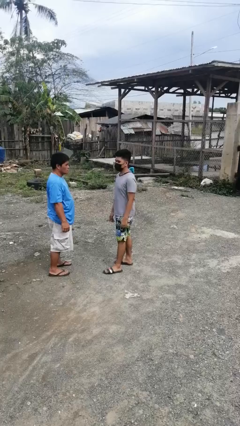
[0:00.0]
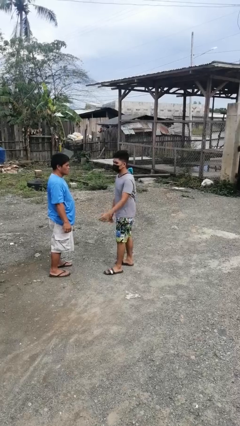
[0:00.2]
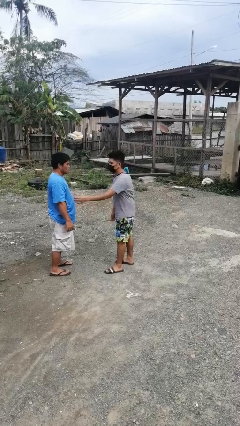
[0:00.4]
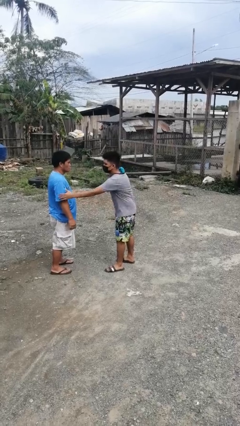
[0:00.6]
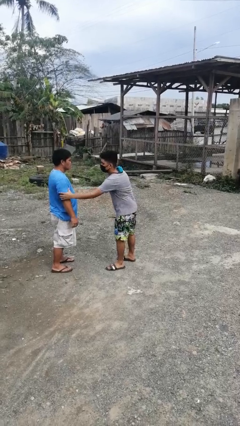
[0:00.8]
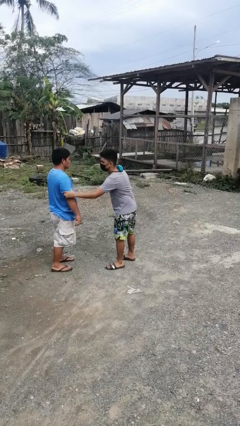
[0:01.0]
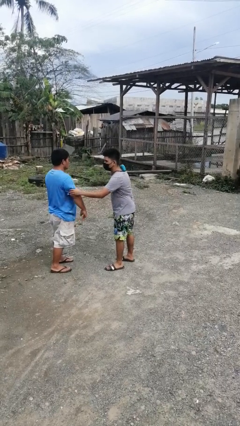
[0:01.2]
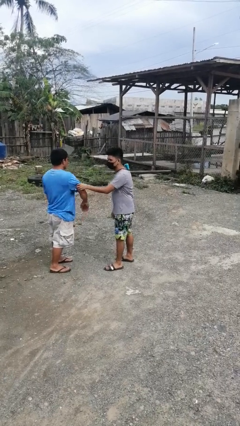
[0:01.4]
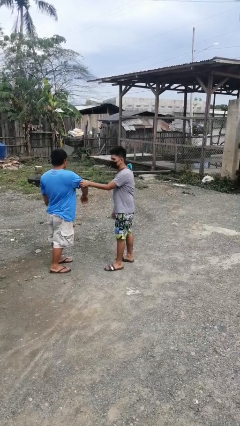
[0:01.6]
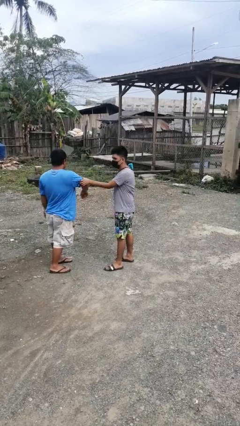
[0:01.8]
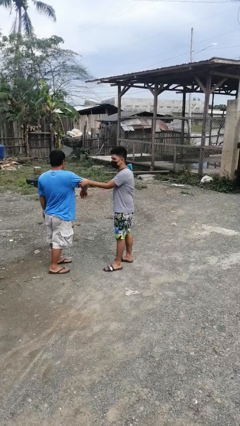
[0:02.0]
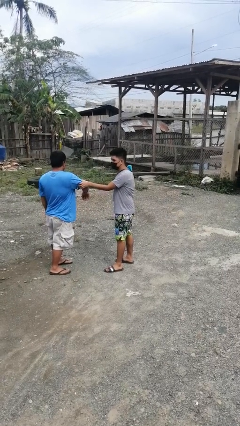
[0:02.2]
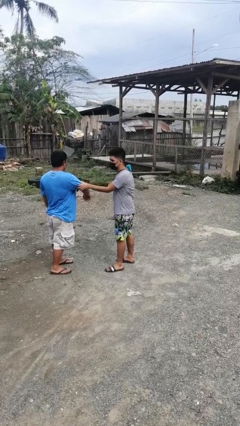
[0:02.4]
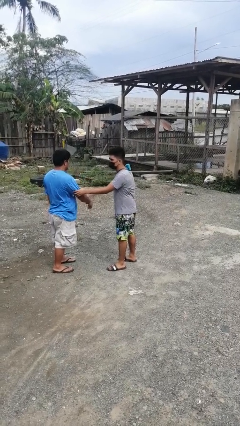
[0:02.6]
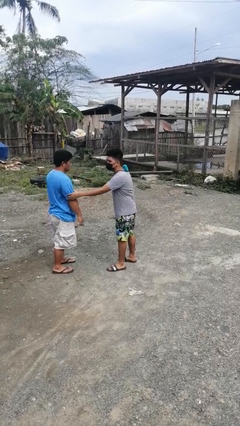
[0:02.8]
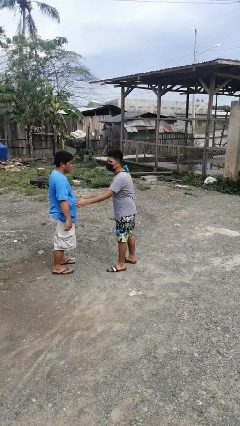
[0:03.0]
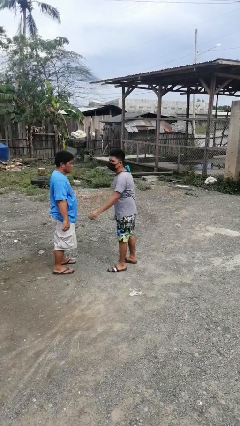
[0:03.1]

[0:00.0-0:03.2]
person grabs person by bicep

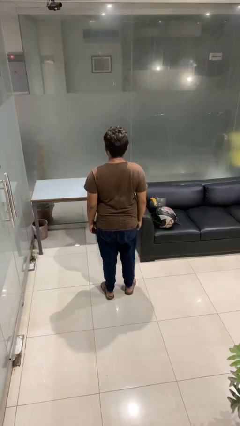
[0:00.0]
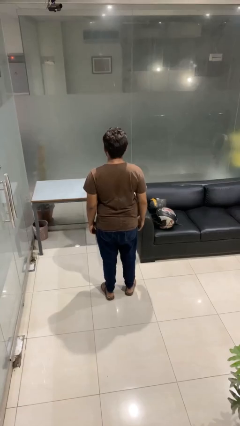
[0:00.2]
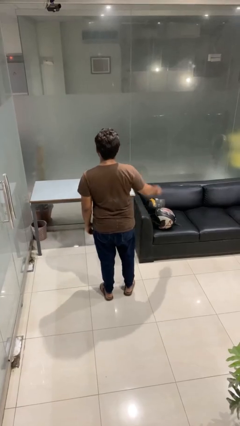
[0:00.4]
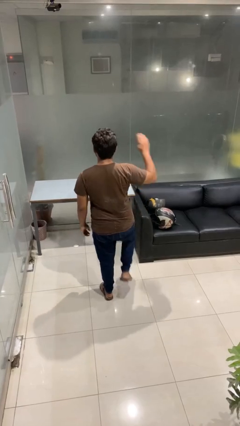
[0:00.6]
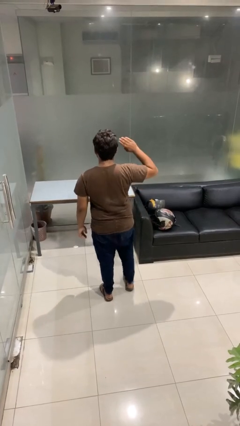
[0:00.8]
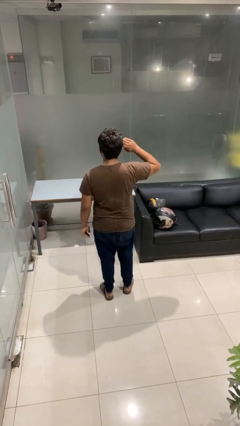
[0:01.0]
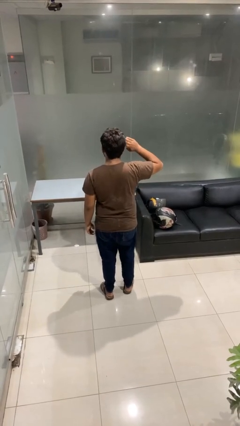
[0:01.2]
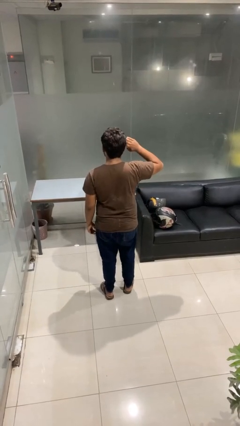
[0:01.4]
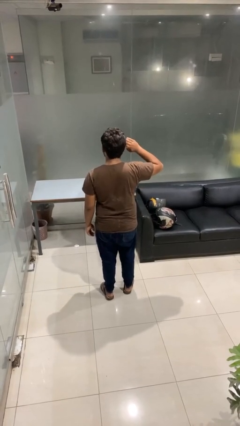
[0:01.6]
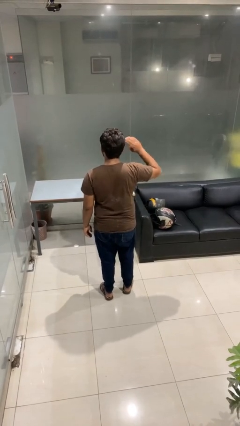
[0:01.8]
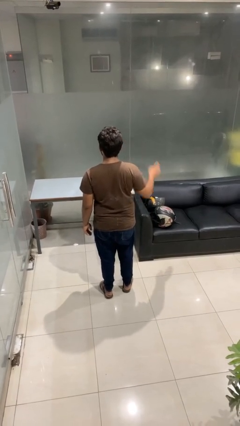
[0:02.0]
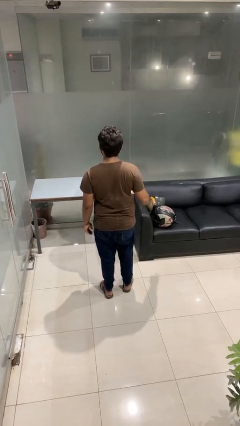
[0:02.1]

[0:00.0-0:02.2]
person salutes

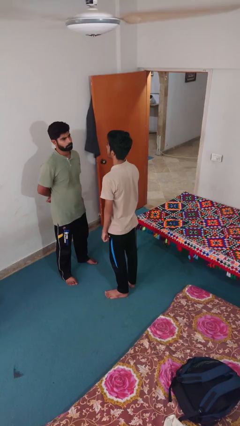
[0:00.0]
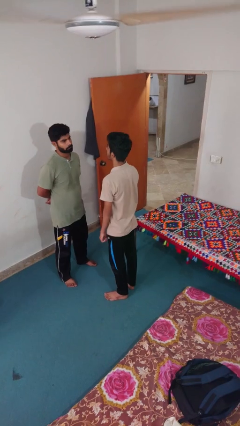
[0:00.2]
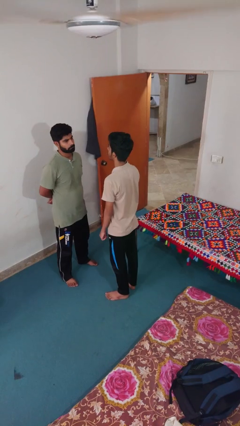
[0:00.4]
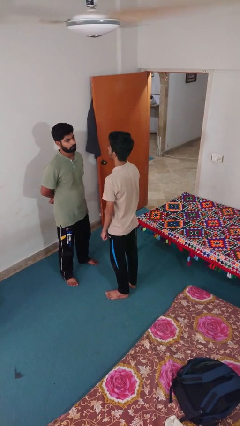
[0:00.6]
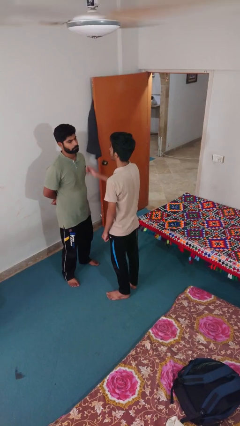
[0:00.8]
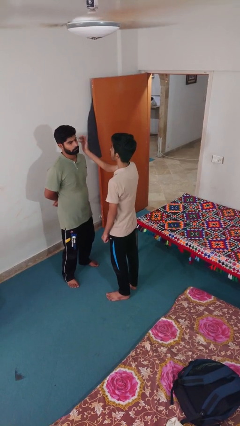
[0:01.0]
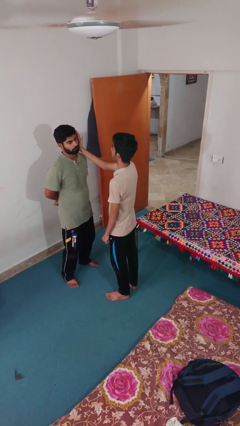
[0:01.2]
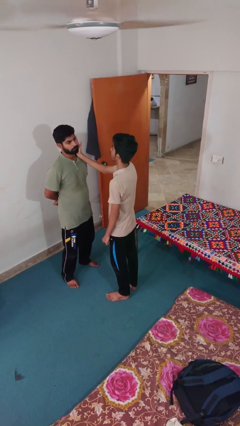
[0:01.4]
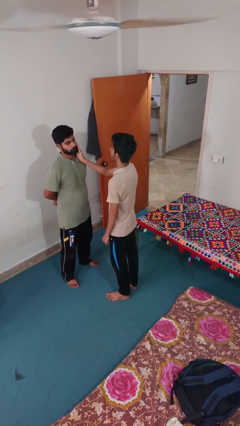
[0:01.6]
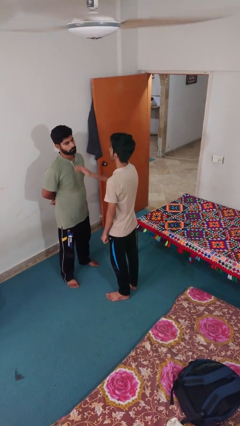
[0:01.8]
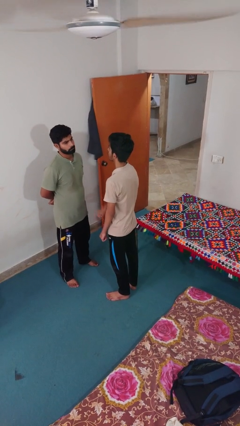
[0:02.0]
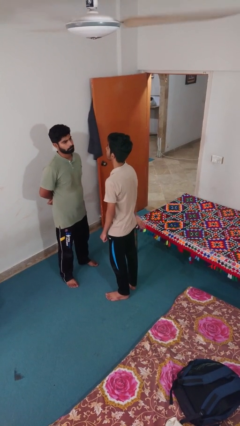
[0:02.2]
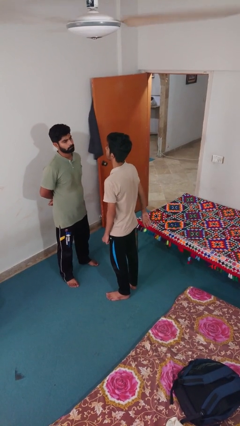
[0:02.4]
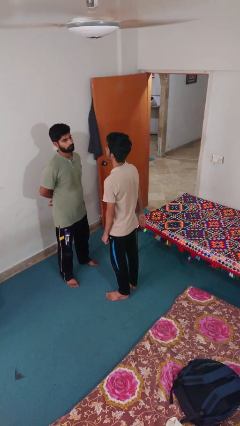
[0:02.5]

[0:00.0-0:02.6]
person touches face of person

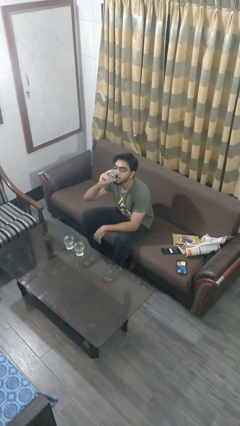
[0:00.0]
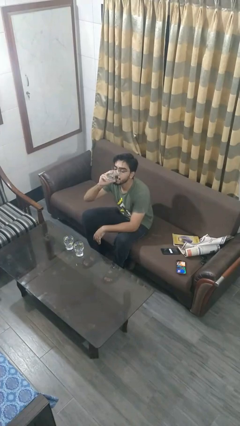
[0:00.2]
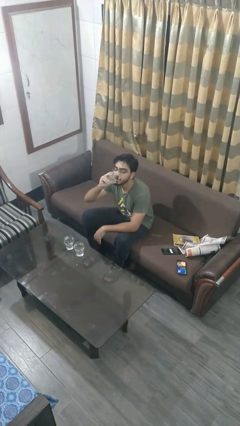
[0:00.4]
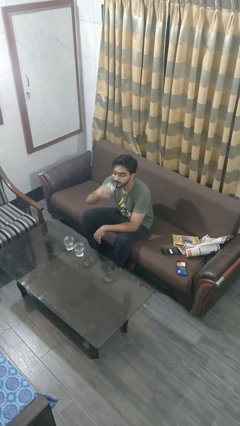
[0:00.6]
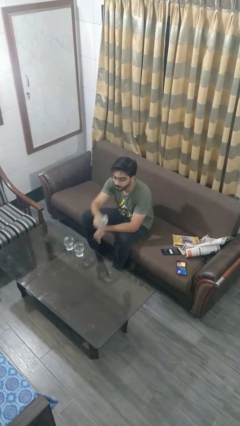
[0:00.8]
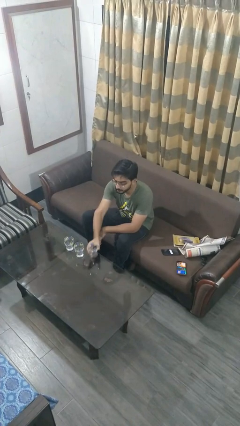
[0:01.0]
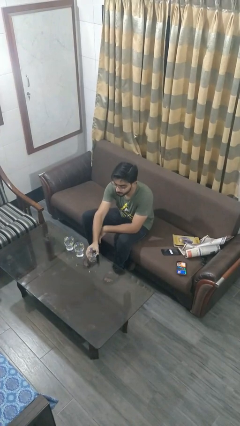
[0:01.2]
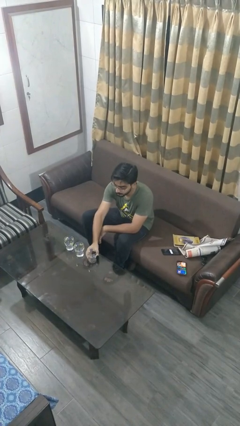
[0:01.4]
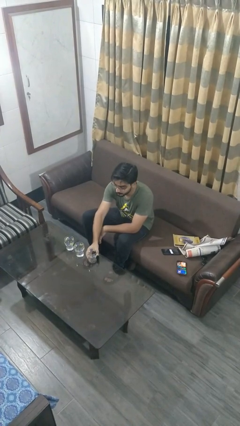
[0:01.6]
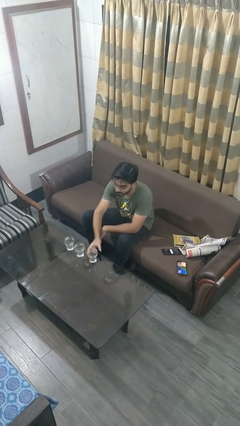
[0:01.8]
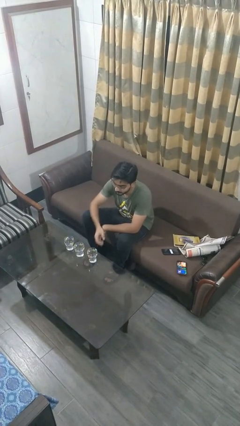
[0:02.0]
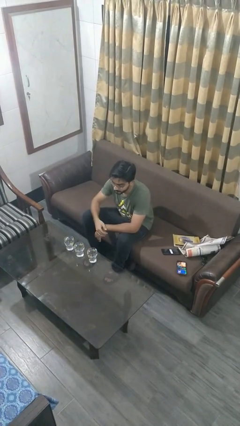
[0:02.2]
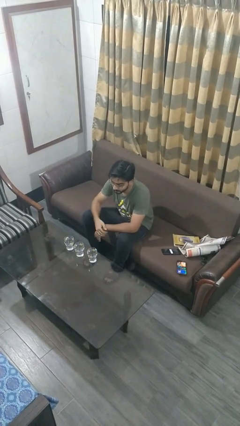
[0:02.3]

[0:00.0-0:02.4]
person puts down object on table

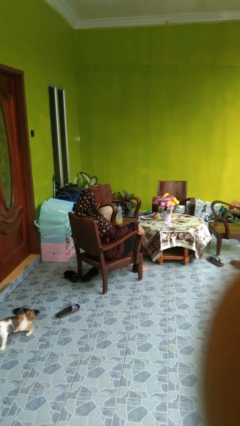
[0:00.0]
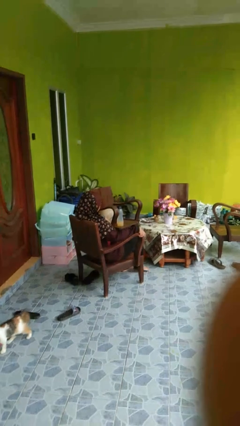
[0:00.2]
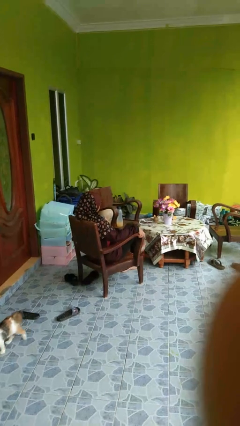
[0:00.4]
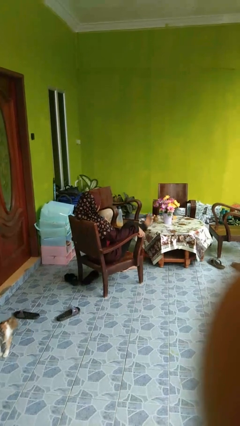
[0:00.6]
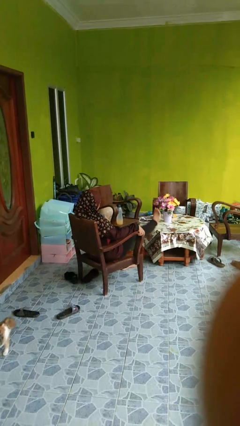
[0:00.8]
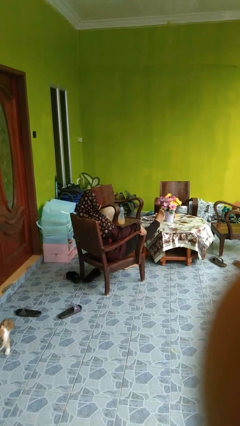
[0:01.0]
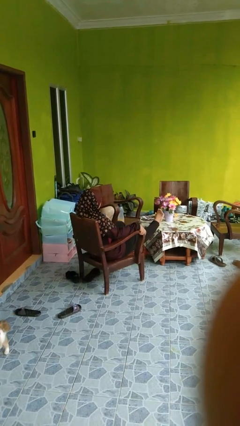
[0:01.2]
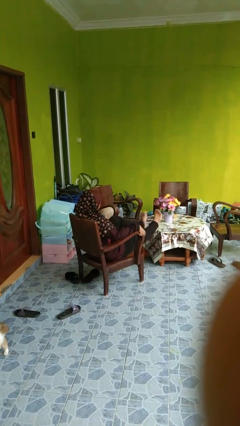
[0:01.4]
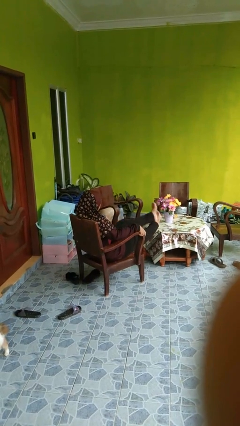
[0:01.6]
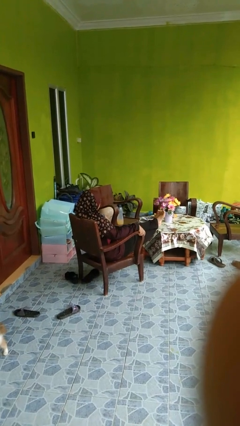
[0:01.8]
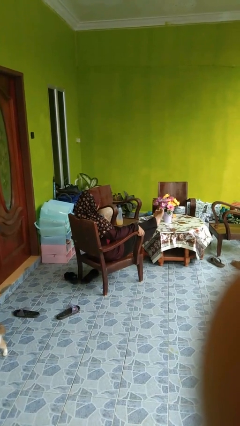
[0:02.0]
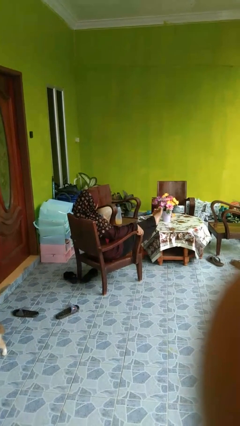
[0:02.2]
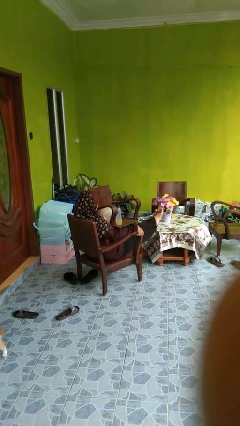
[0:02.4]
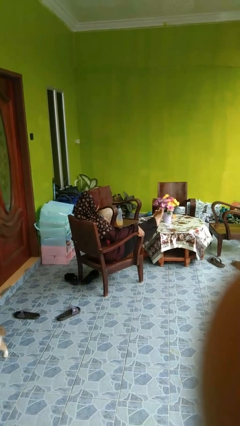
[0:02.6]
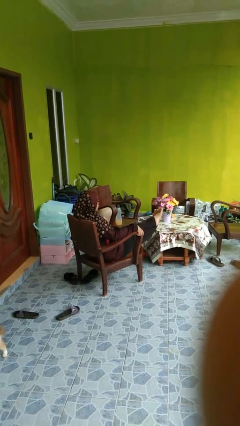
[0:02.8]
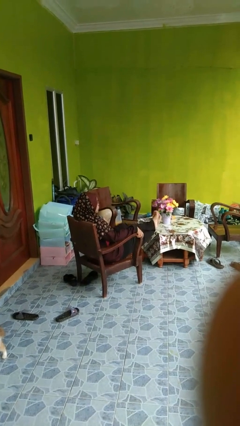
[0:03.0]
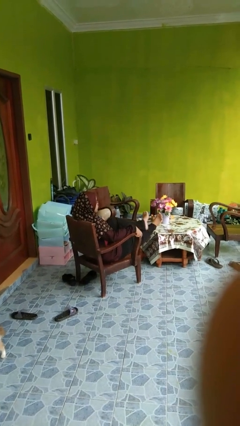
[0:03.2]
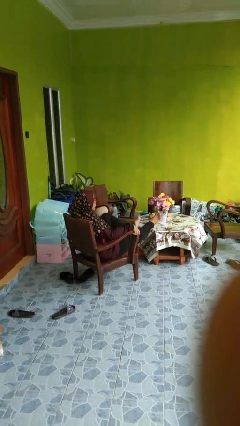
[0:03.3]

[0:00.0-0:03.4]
person crosses arms

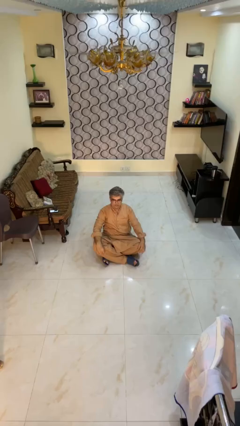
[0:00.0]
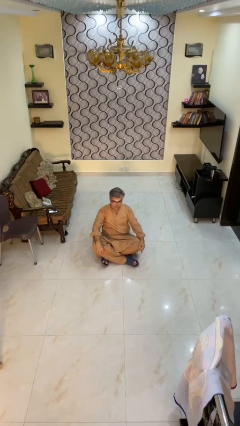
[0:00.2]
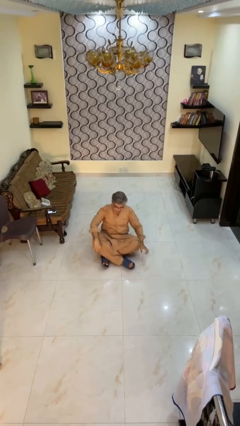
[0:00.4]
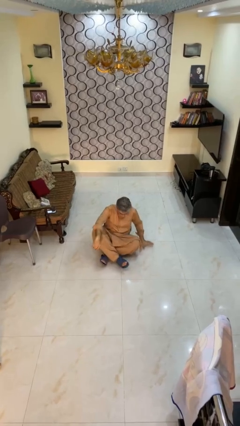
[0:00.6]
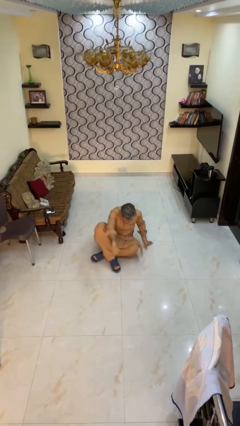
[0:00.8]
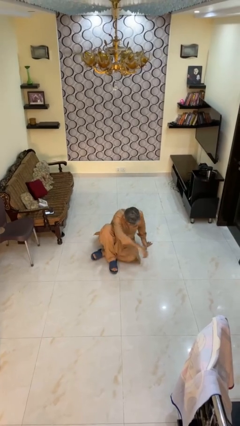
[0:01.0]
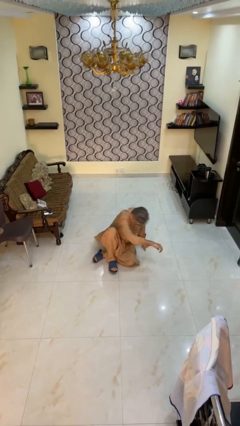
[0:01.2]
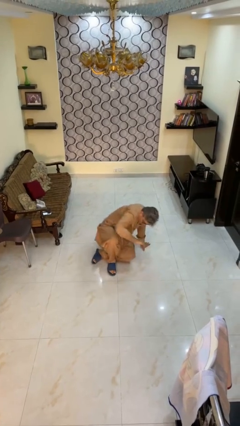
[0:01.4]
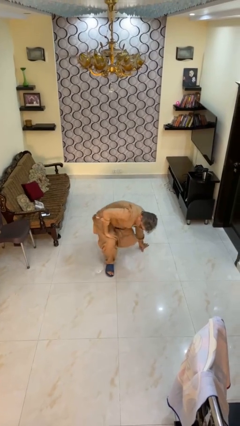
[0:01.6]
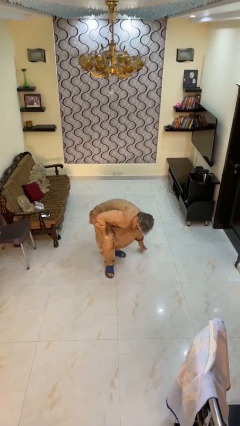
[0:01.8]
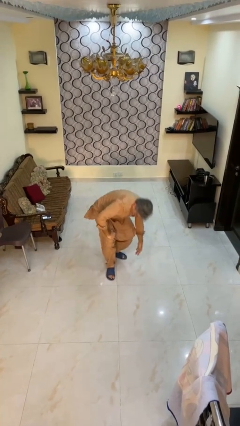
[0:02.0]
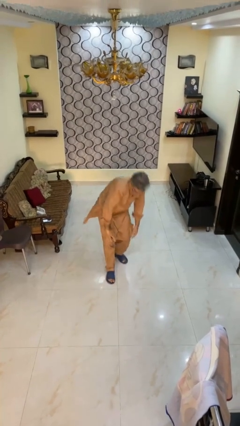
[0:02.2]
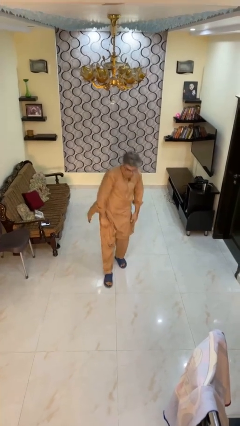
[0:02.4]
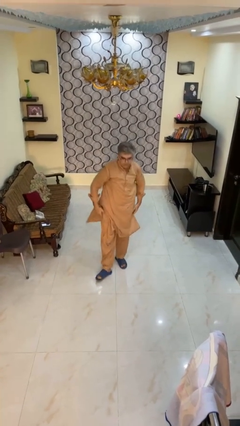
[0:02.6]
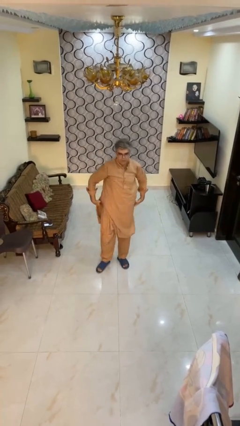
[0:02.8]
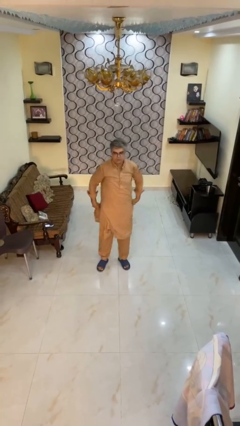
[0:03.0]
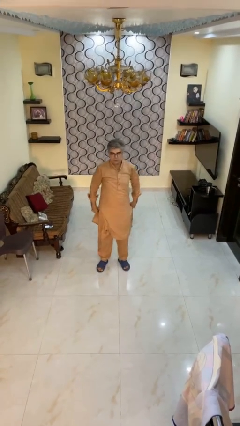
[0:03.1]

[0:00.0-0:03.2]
person stands up from floor

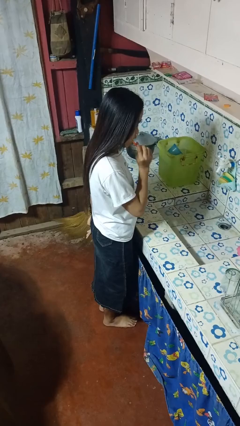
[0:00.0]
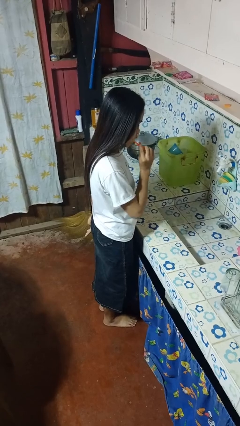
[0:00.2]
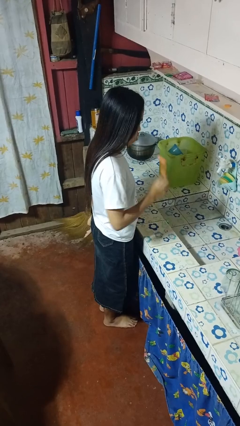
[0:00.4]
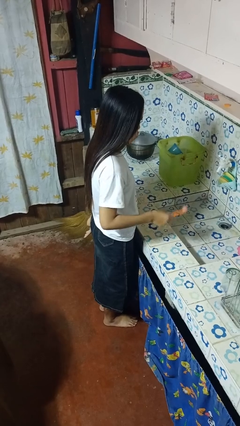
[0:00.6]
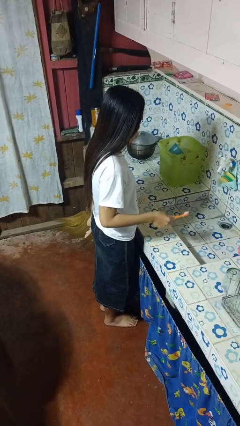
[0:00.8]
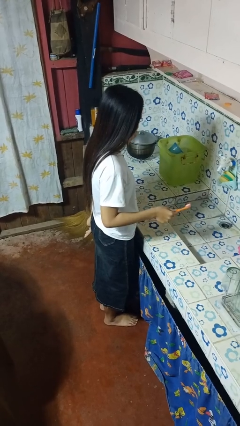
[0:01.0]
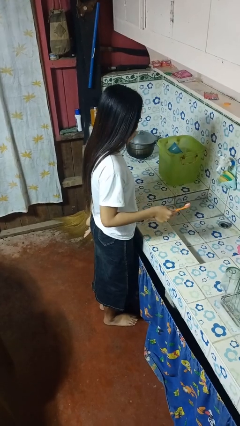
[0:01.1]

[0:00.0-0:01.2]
person brushes teeth
